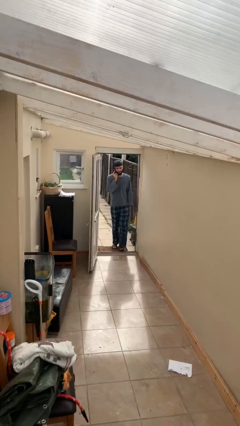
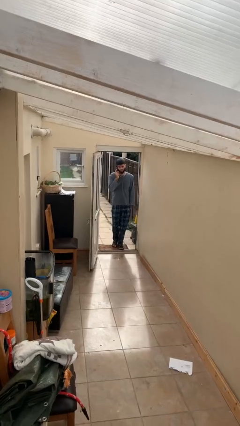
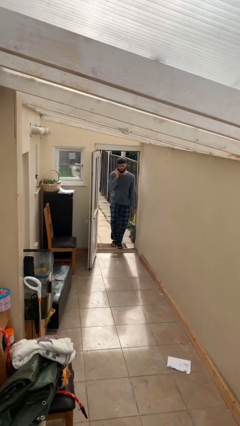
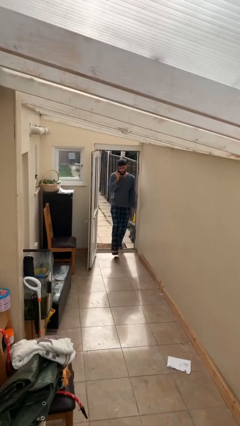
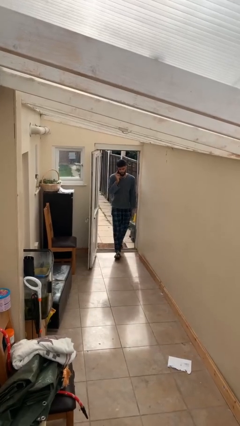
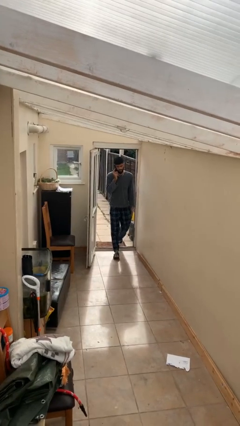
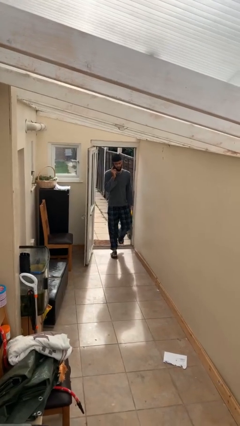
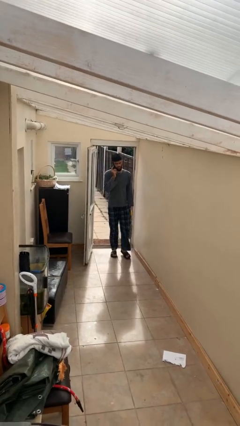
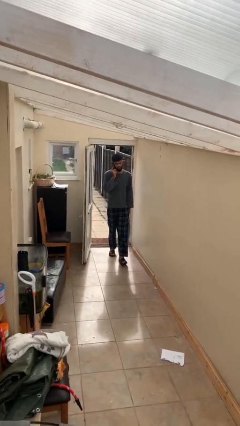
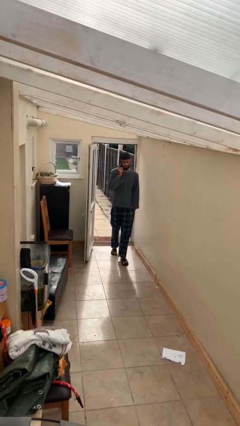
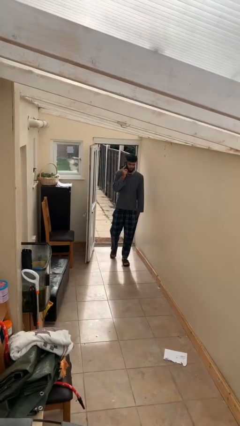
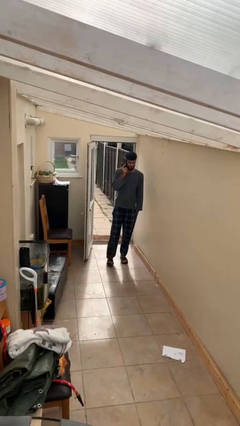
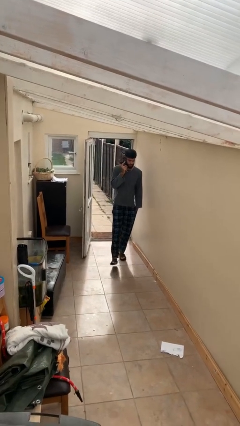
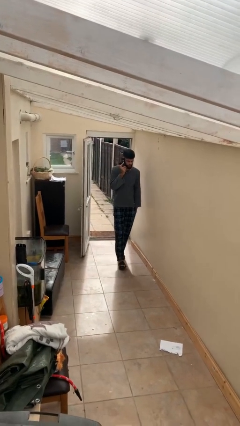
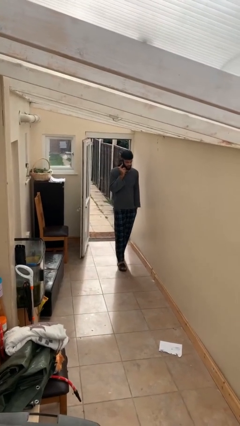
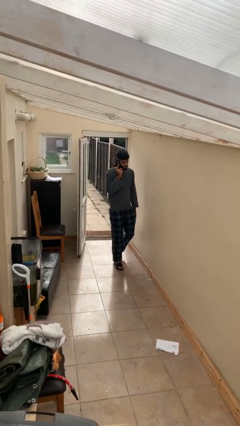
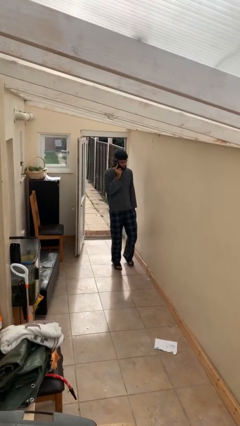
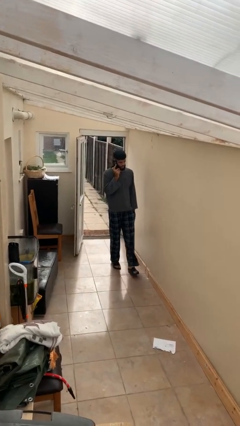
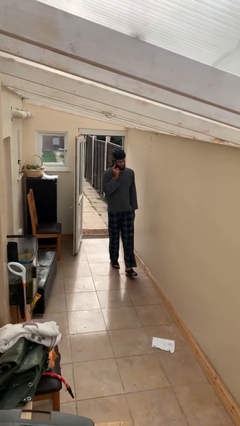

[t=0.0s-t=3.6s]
person enters scene through structure

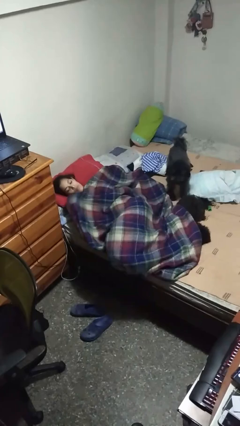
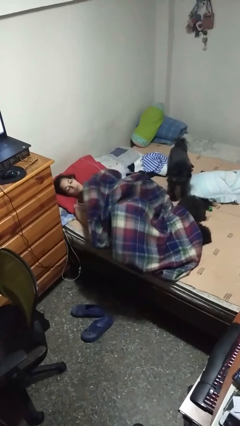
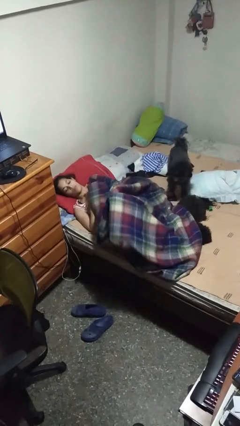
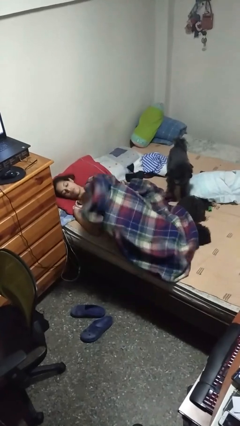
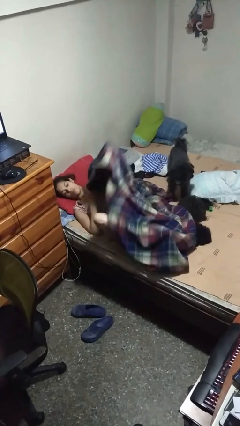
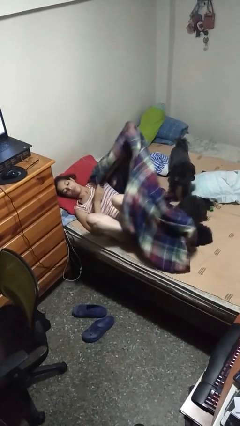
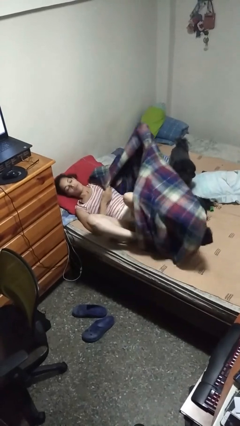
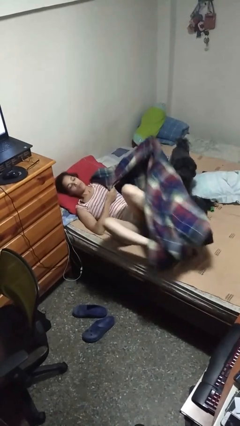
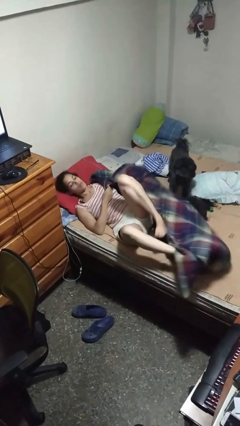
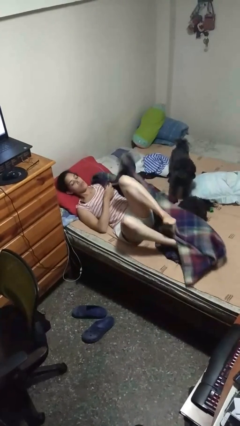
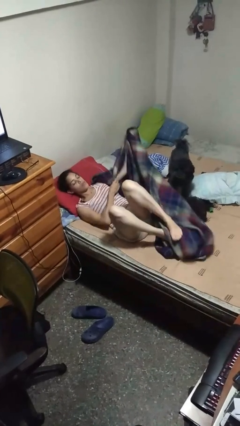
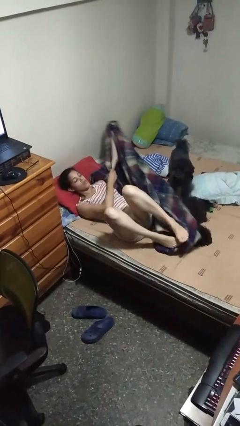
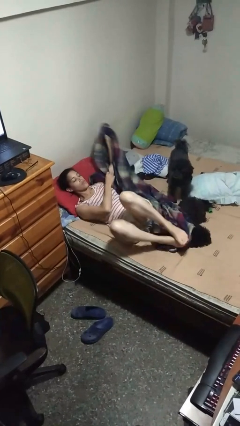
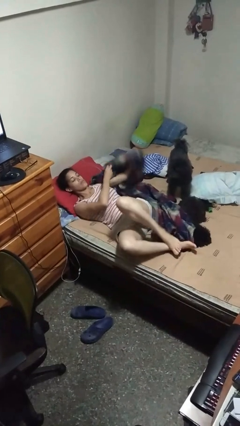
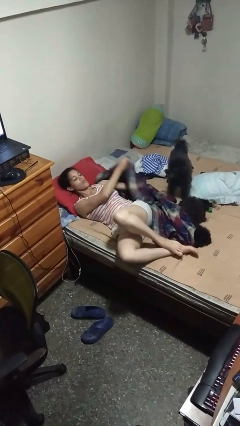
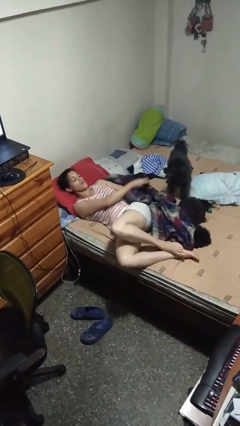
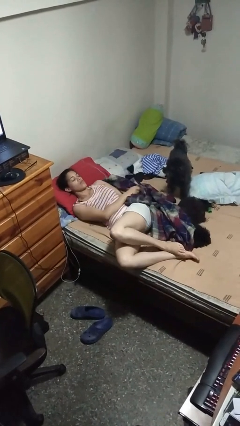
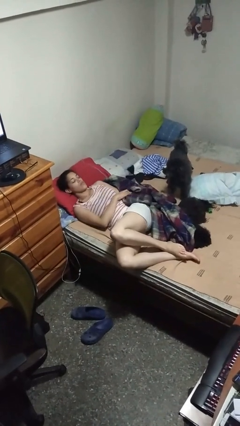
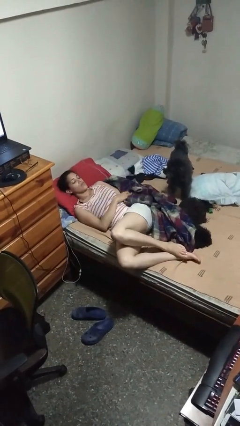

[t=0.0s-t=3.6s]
person uncovers with bedsheets

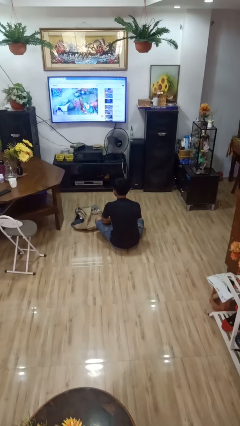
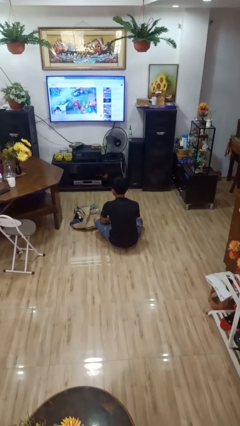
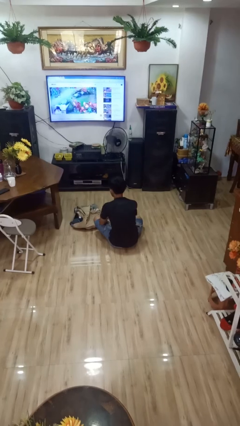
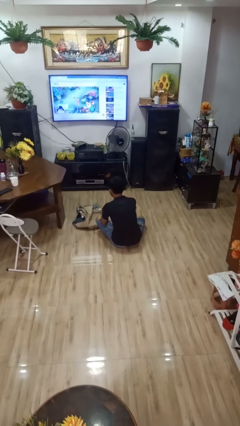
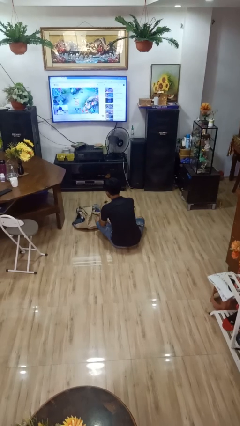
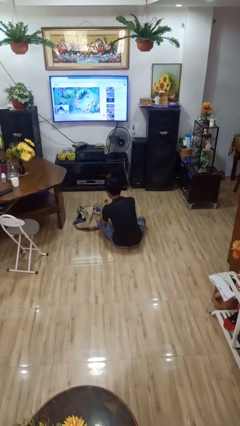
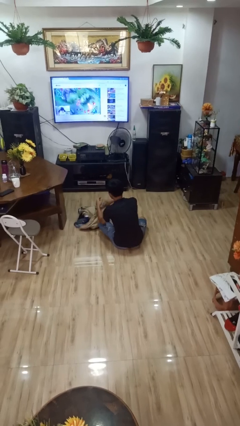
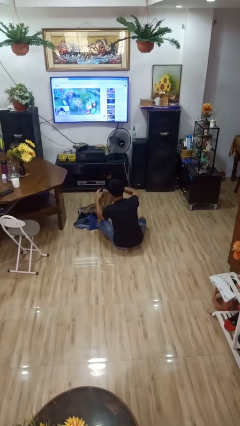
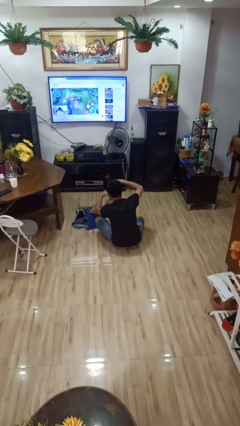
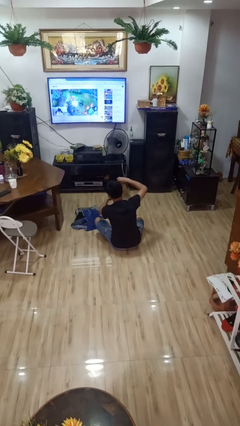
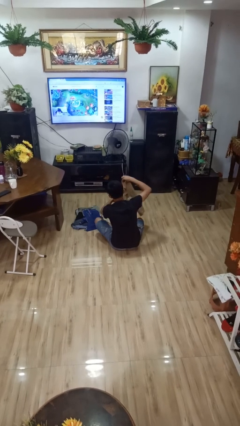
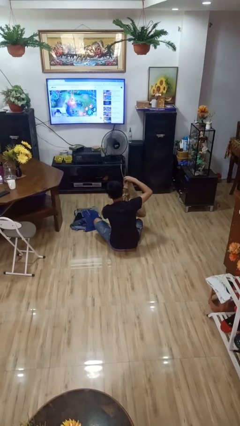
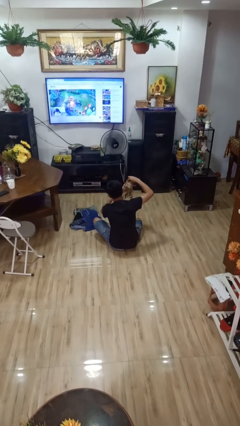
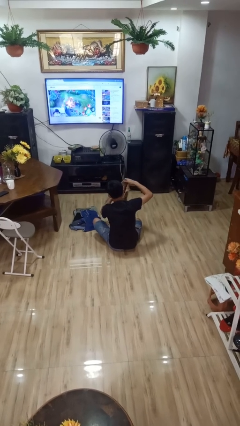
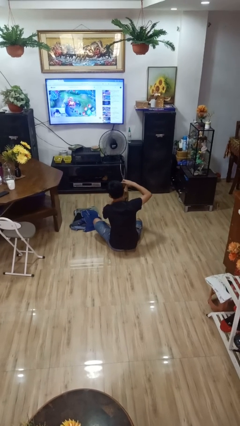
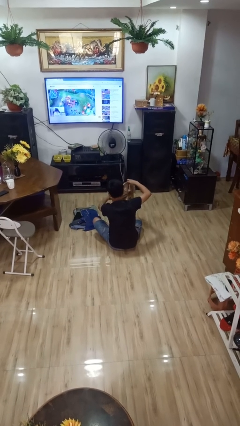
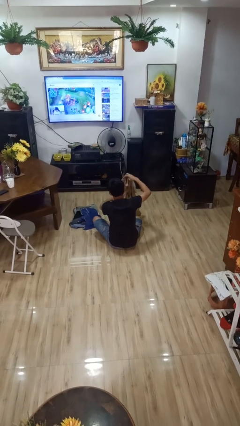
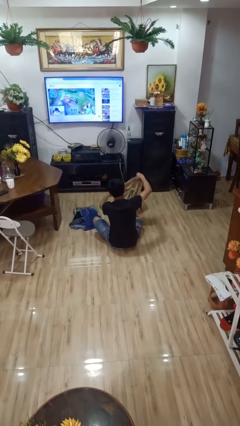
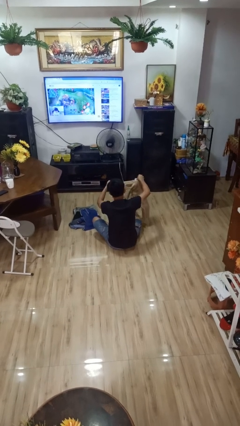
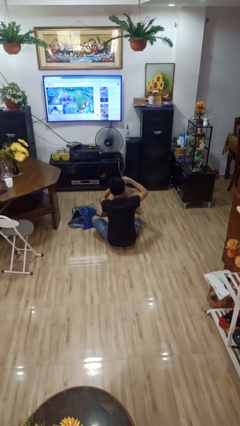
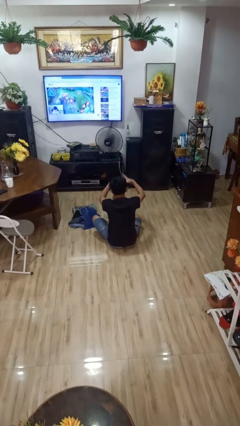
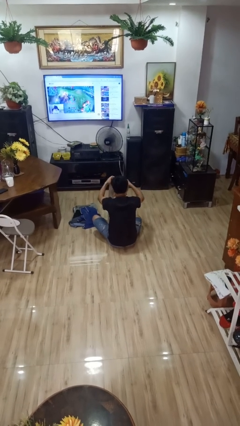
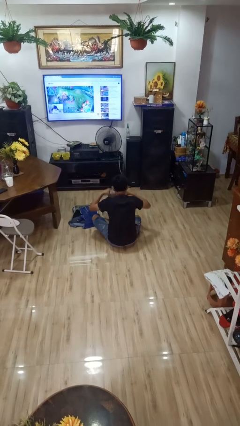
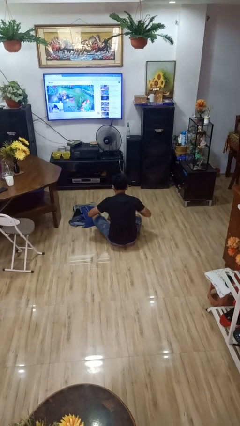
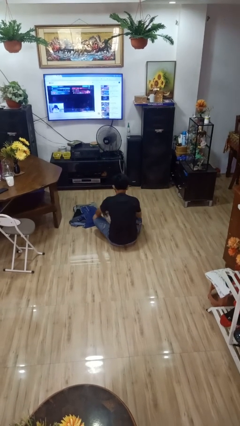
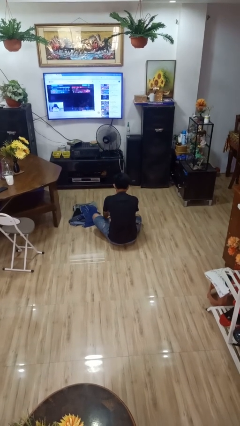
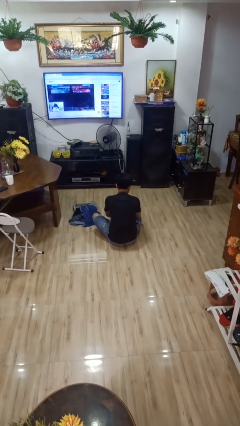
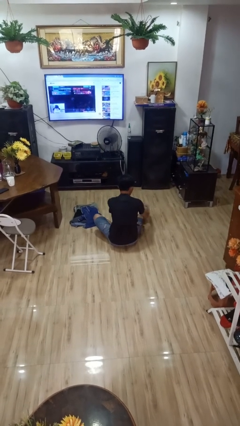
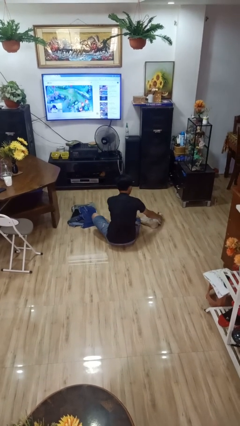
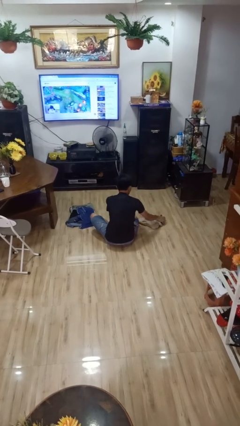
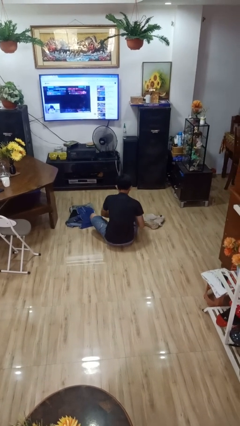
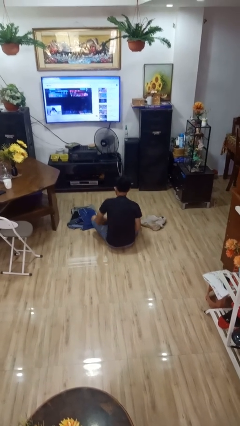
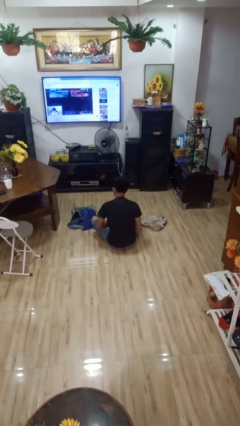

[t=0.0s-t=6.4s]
person folds pants

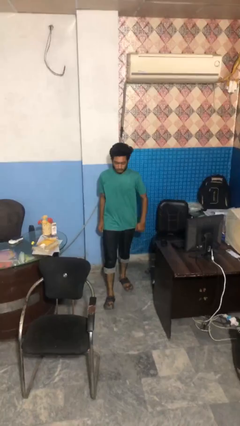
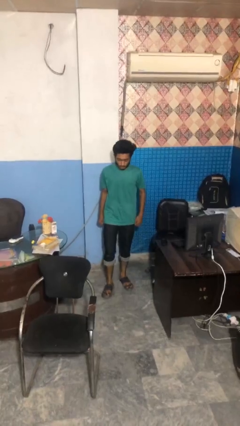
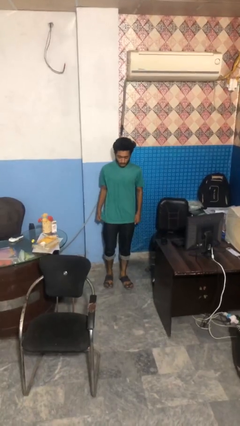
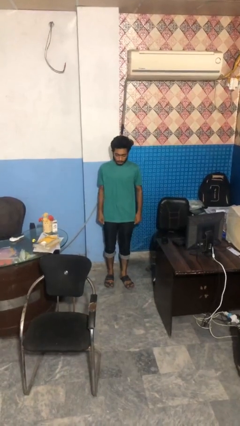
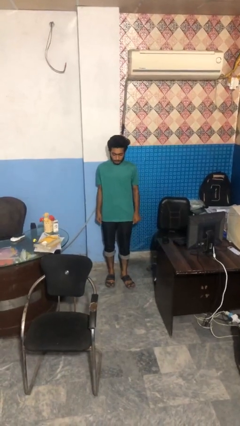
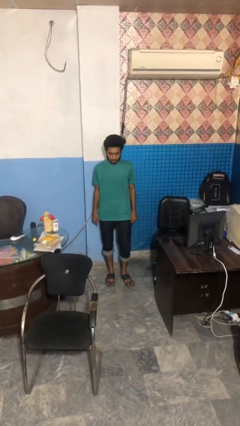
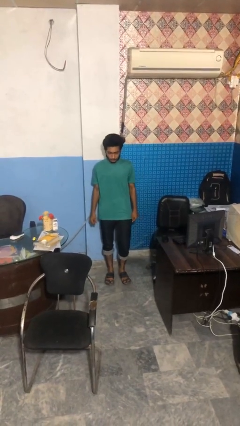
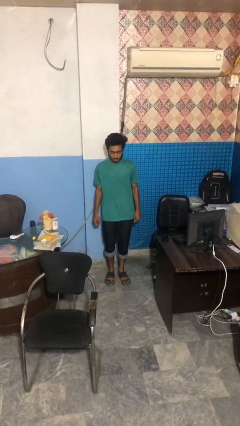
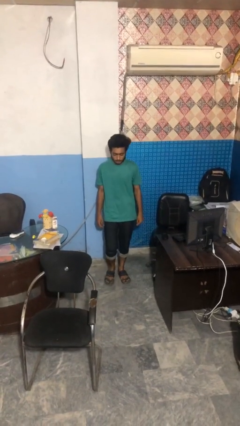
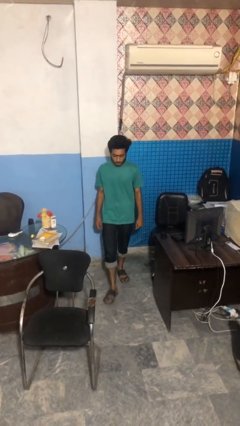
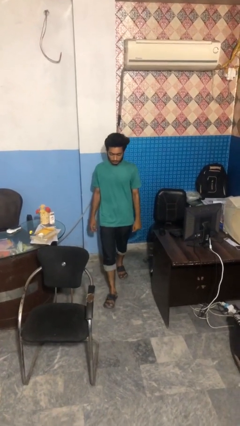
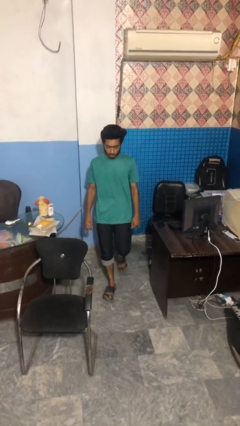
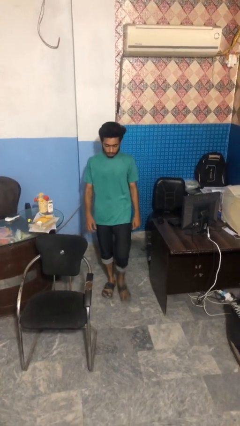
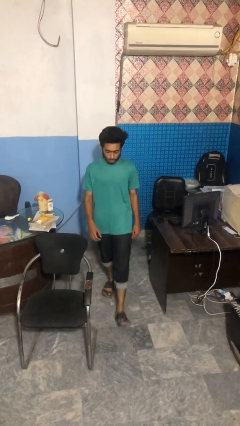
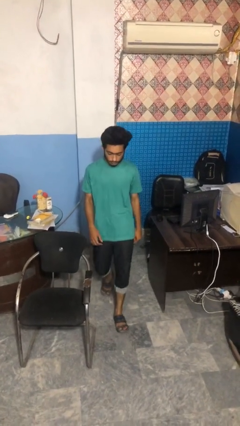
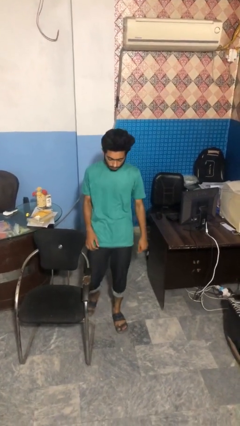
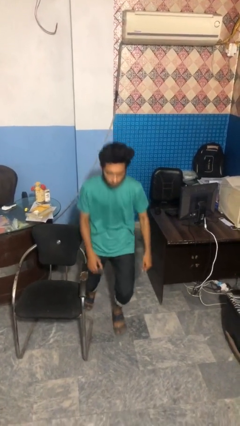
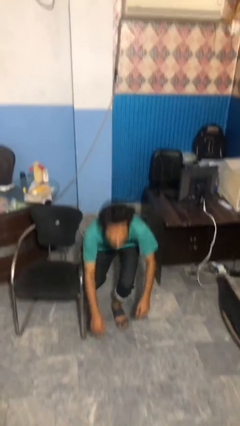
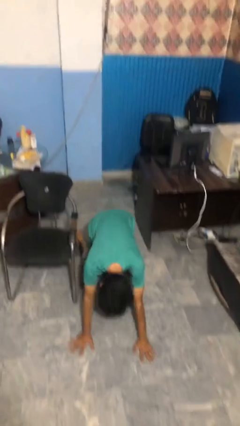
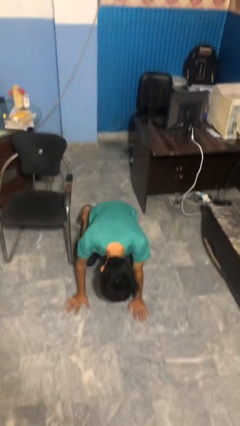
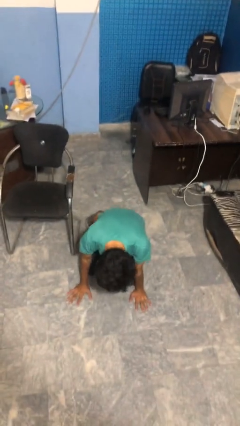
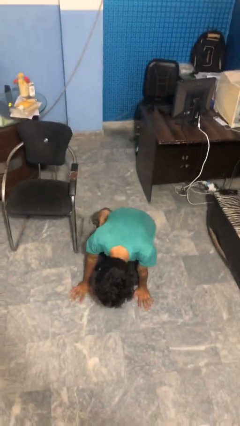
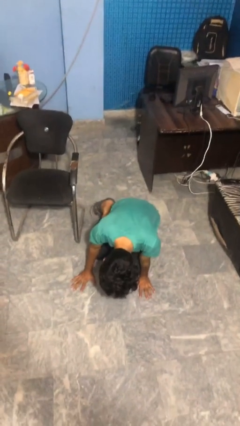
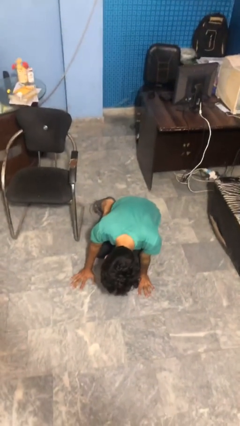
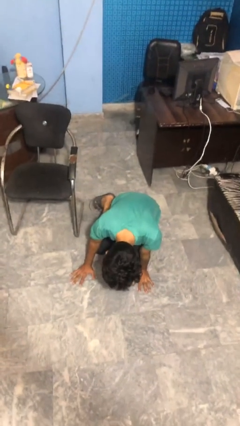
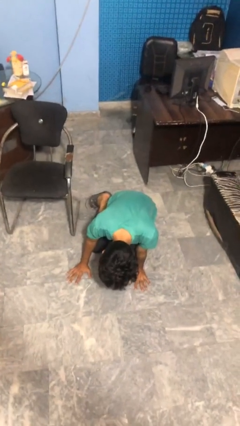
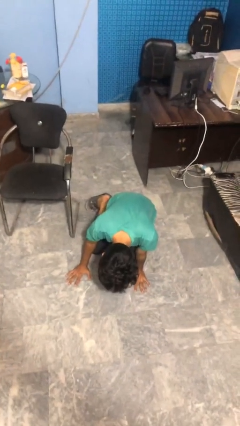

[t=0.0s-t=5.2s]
person trips on object on floor
